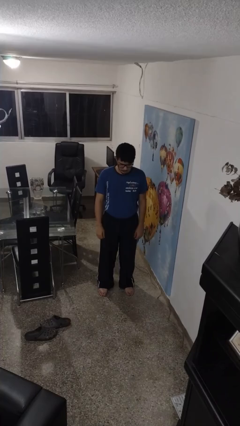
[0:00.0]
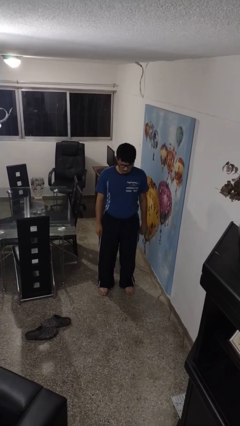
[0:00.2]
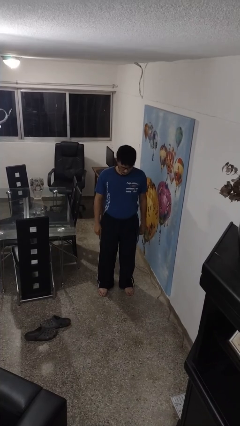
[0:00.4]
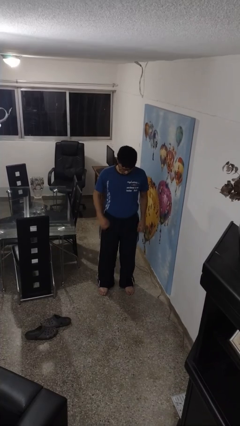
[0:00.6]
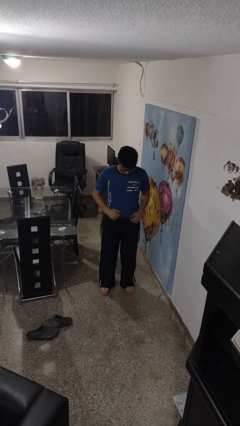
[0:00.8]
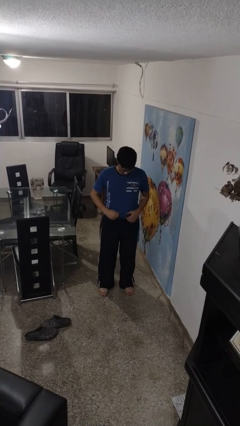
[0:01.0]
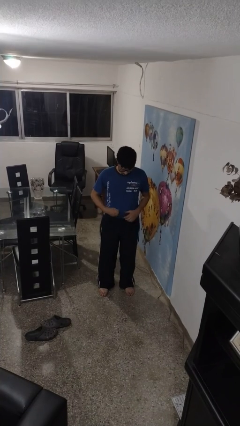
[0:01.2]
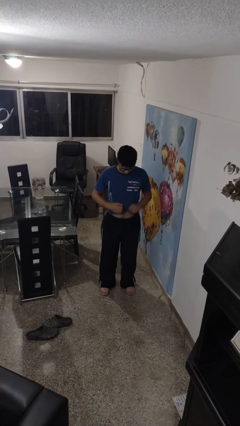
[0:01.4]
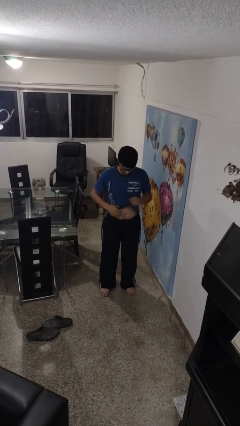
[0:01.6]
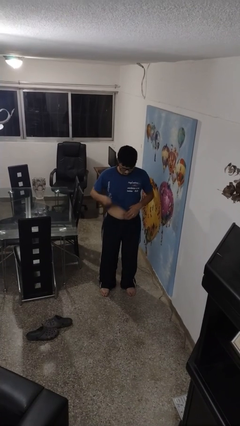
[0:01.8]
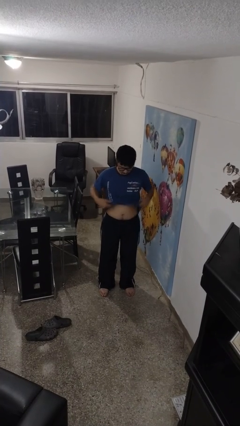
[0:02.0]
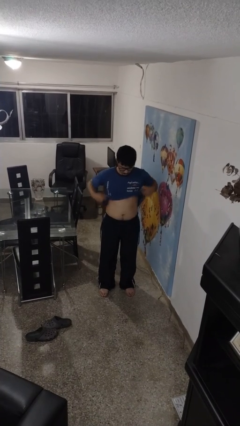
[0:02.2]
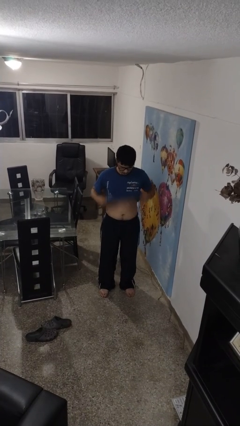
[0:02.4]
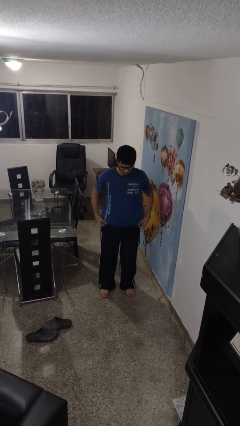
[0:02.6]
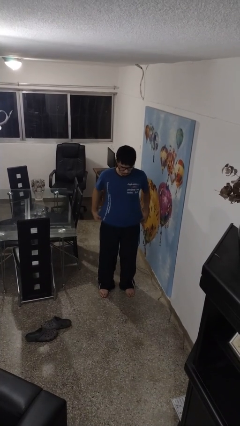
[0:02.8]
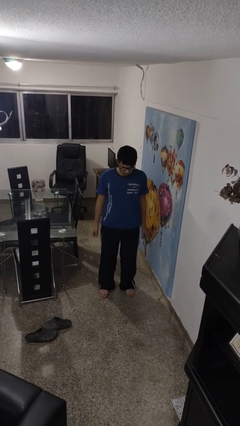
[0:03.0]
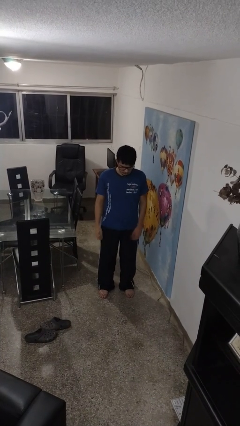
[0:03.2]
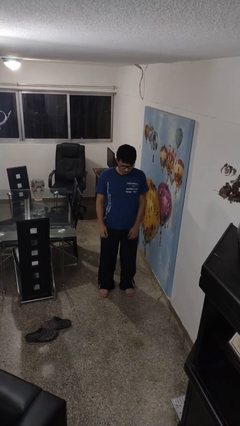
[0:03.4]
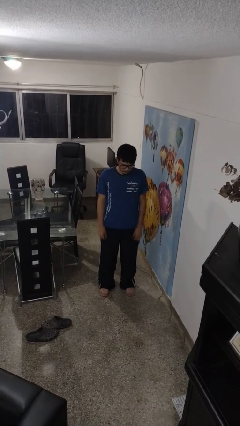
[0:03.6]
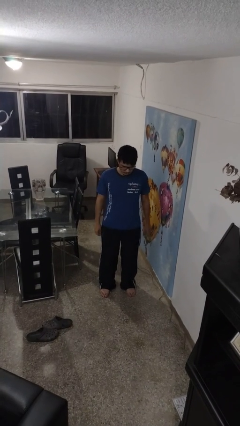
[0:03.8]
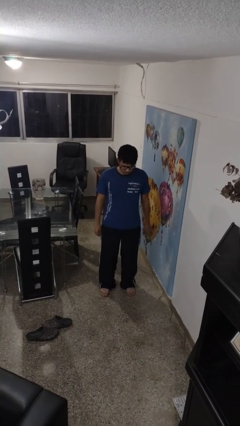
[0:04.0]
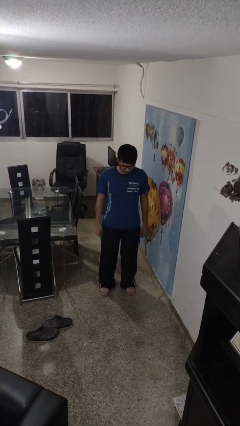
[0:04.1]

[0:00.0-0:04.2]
person untucks shirt

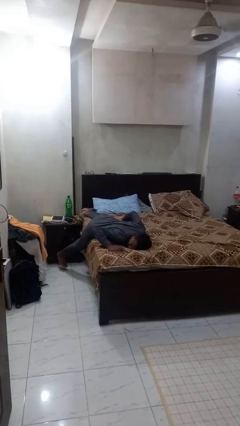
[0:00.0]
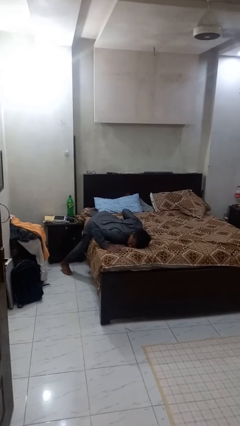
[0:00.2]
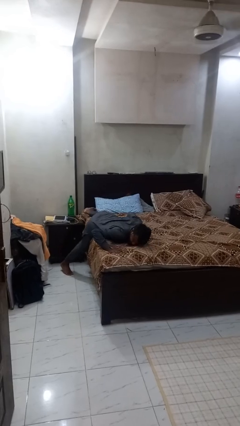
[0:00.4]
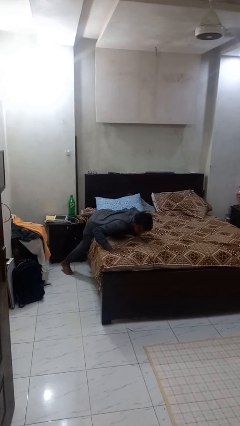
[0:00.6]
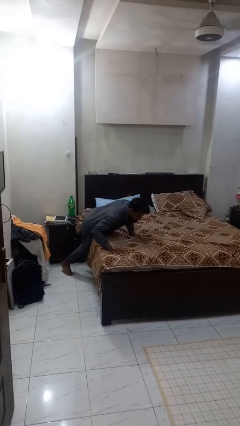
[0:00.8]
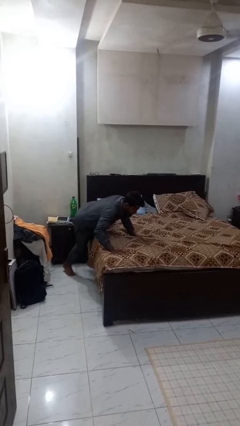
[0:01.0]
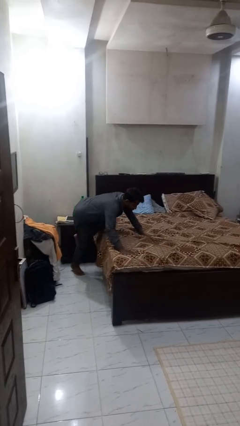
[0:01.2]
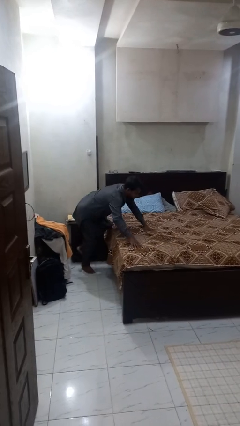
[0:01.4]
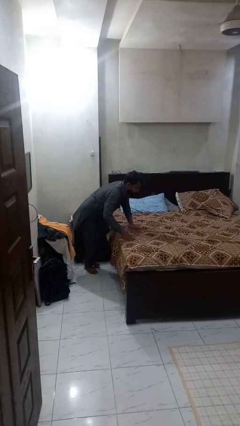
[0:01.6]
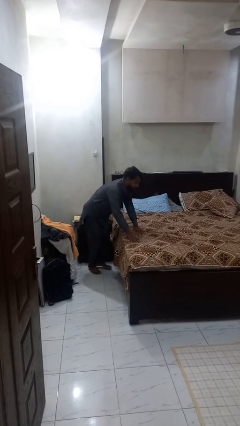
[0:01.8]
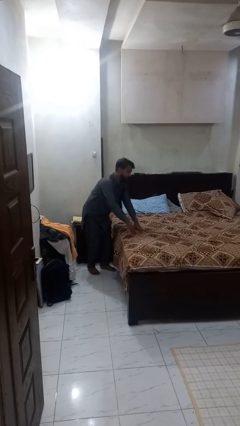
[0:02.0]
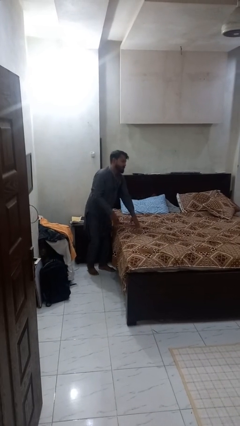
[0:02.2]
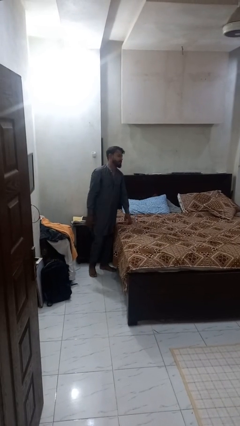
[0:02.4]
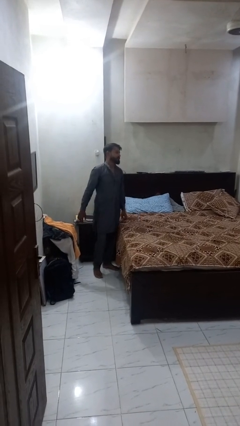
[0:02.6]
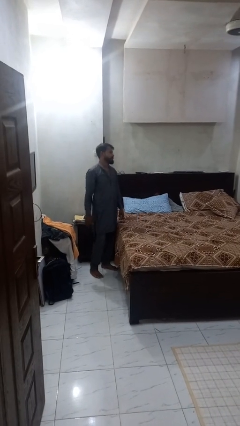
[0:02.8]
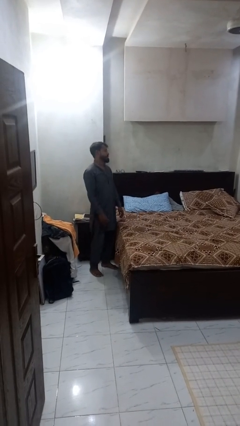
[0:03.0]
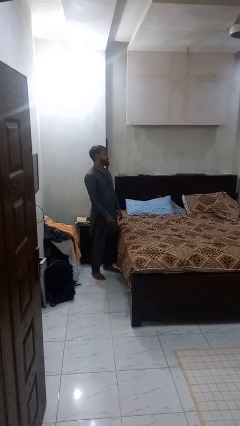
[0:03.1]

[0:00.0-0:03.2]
person stands up

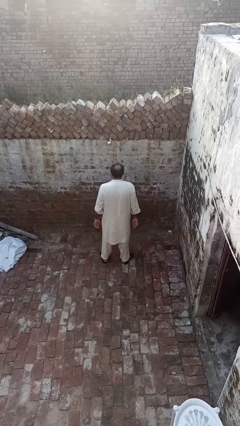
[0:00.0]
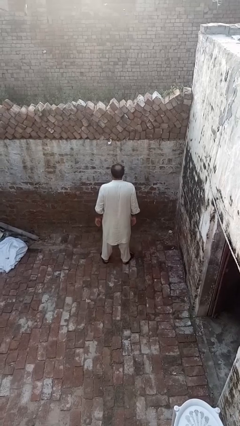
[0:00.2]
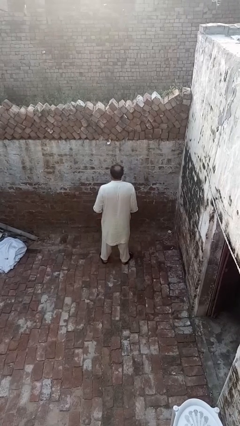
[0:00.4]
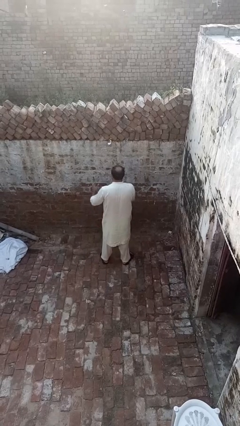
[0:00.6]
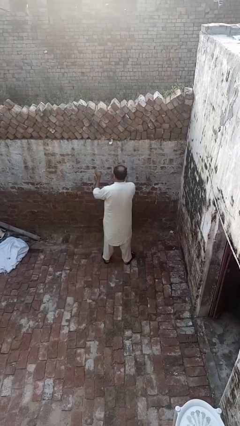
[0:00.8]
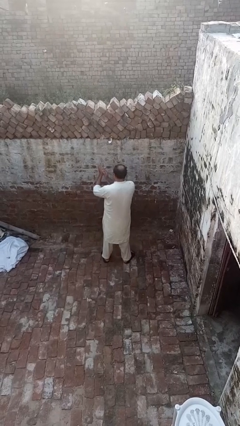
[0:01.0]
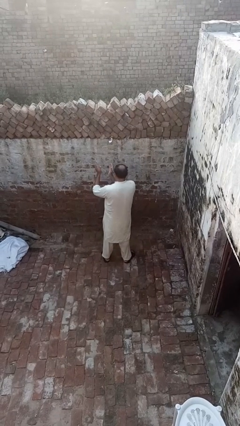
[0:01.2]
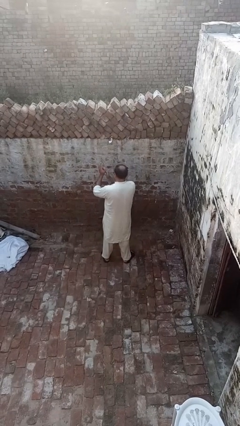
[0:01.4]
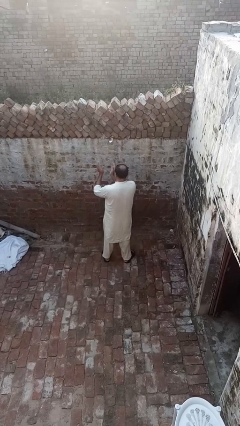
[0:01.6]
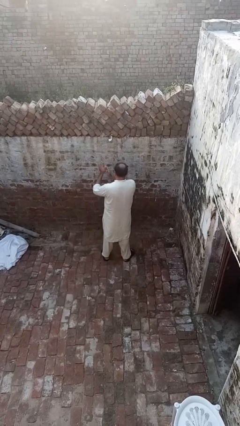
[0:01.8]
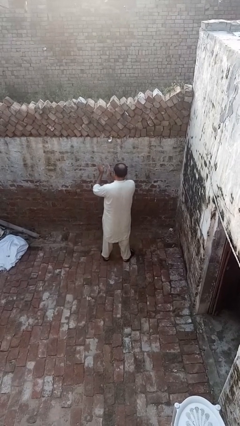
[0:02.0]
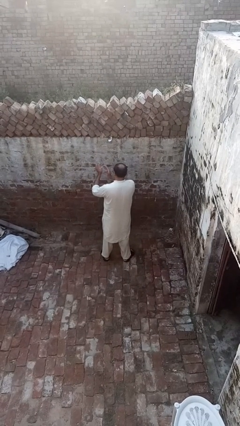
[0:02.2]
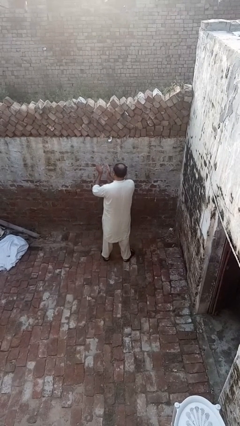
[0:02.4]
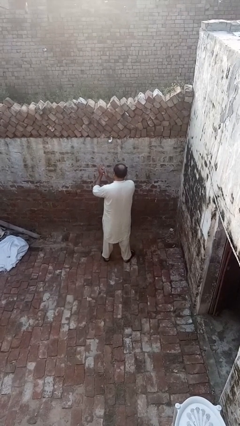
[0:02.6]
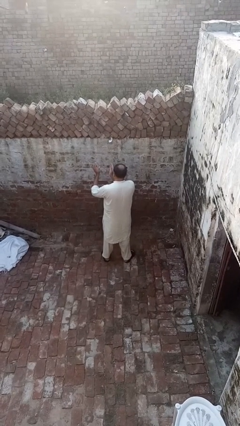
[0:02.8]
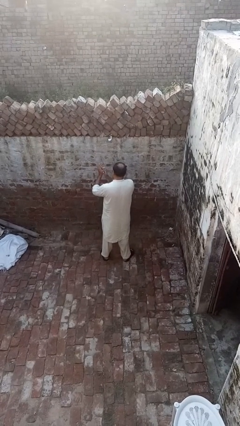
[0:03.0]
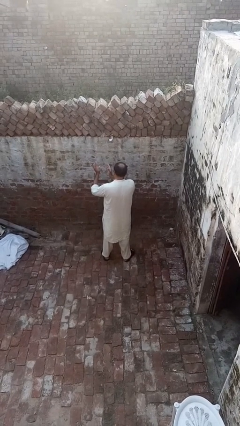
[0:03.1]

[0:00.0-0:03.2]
person claps hands

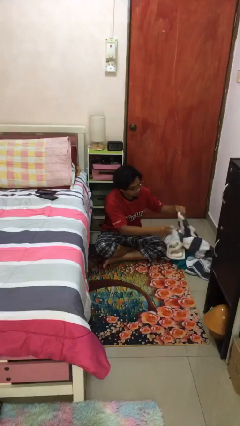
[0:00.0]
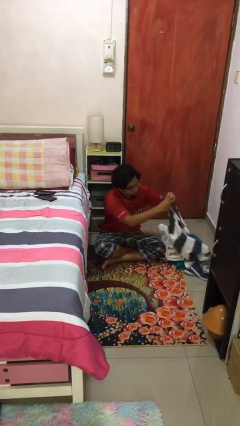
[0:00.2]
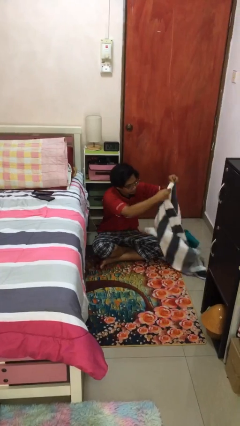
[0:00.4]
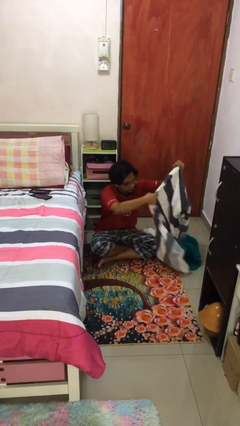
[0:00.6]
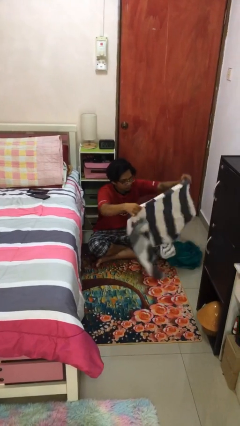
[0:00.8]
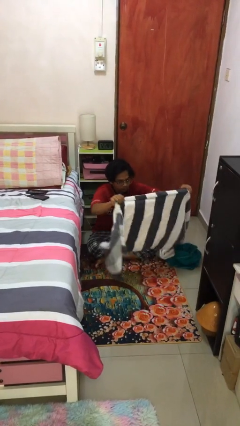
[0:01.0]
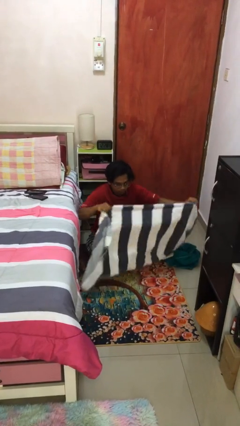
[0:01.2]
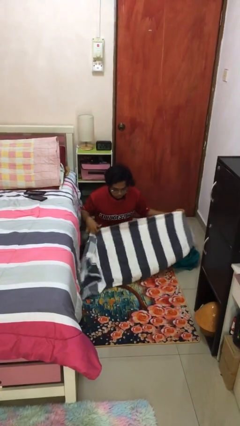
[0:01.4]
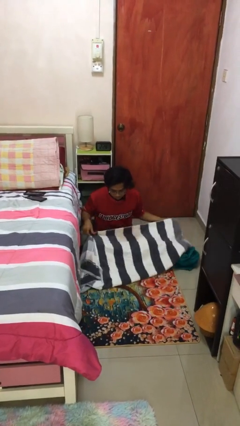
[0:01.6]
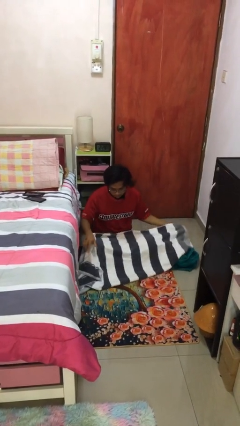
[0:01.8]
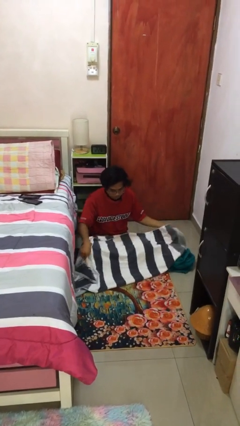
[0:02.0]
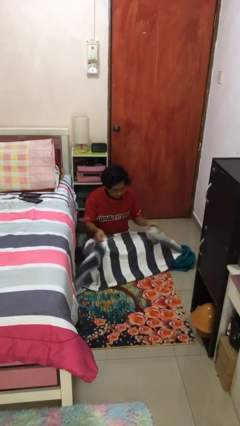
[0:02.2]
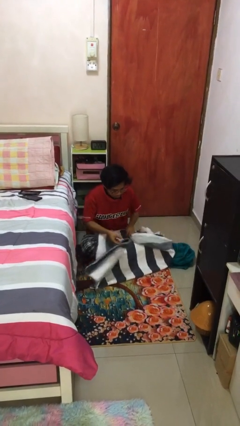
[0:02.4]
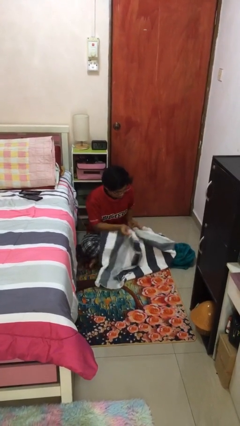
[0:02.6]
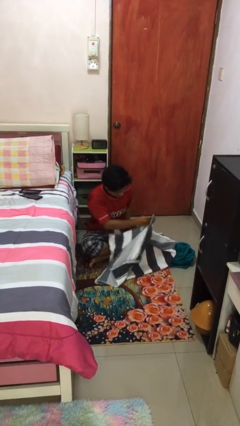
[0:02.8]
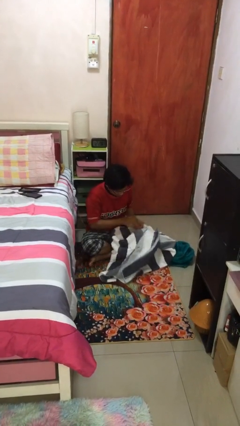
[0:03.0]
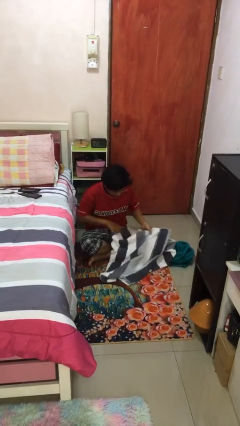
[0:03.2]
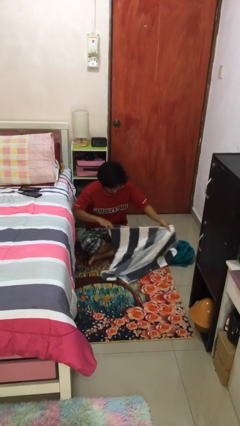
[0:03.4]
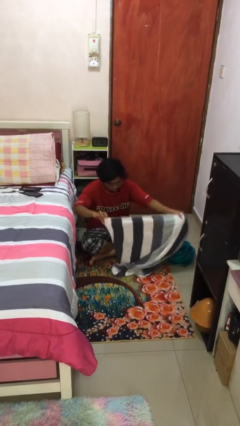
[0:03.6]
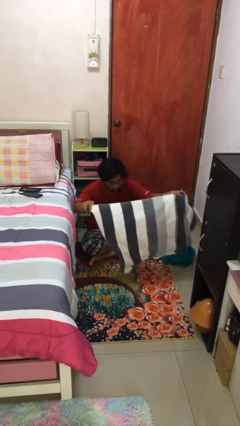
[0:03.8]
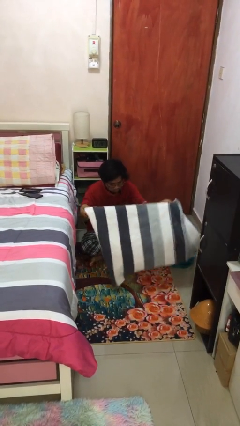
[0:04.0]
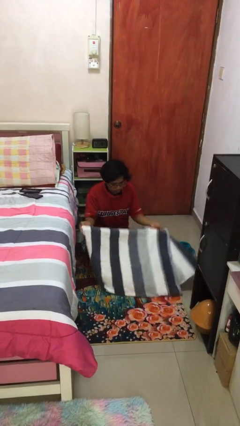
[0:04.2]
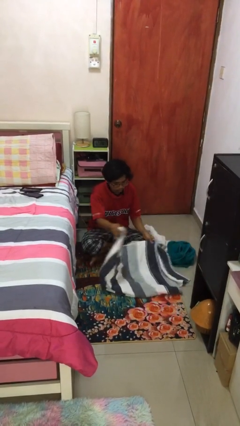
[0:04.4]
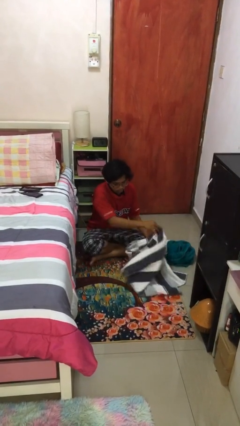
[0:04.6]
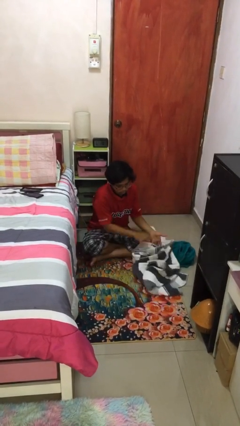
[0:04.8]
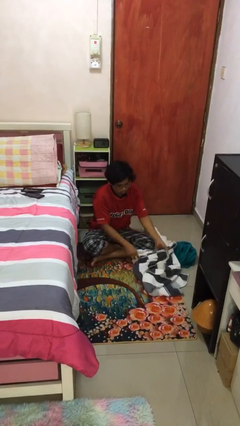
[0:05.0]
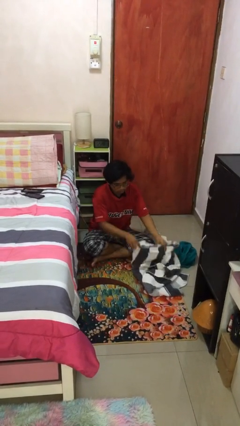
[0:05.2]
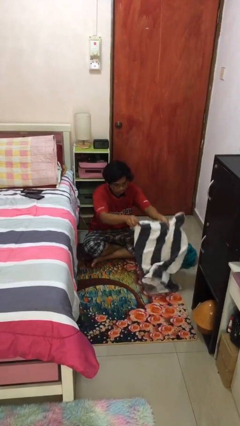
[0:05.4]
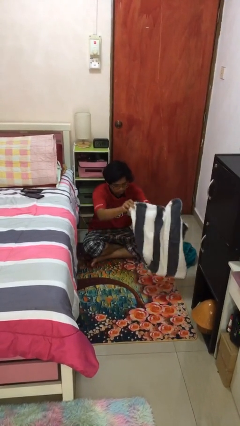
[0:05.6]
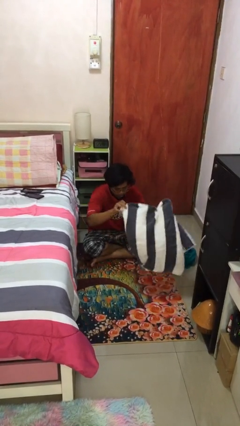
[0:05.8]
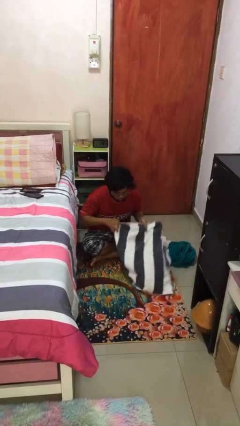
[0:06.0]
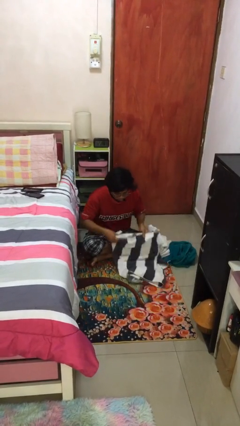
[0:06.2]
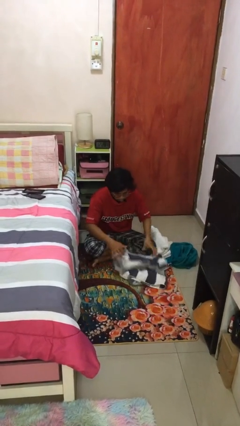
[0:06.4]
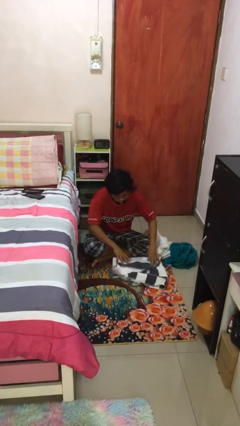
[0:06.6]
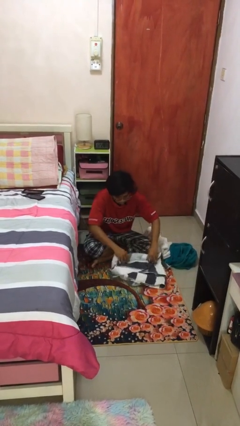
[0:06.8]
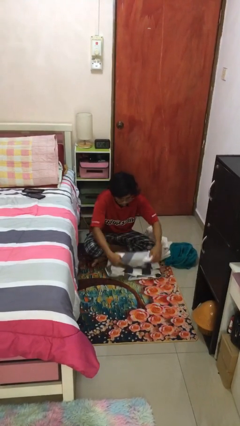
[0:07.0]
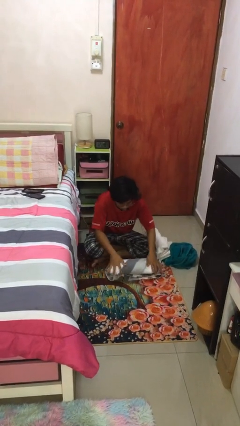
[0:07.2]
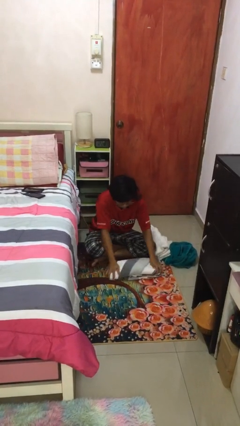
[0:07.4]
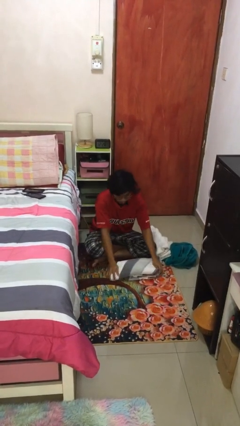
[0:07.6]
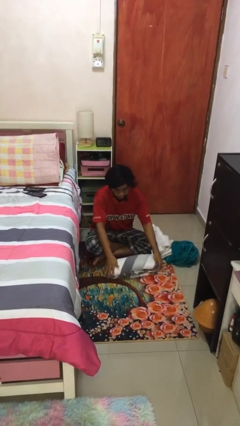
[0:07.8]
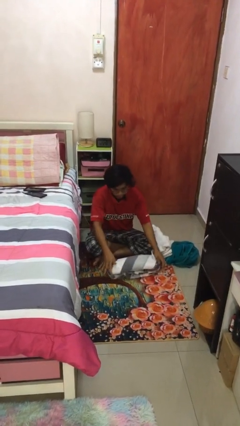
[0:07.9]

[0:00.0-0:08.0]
person folds towel
